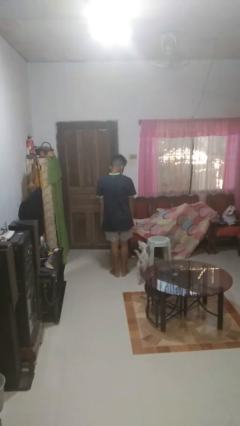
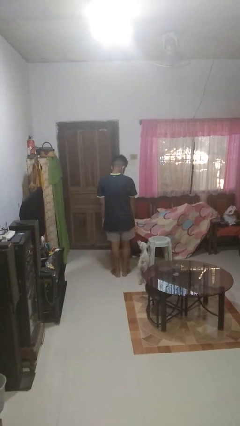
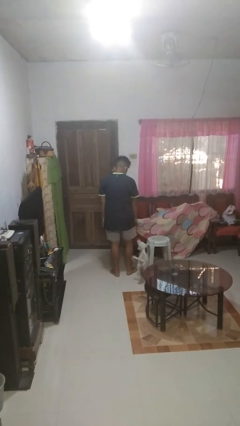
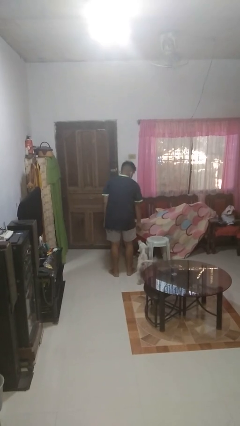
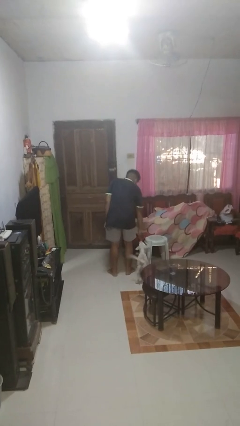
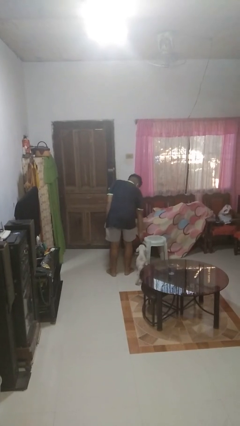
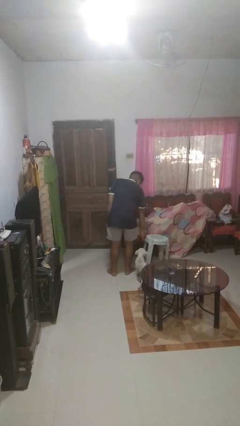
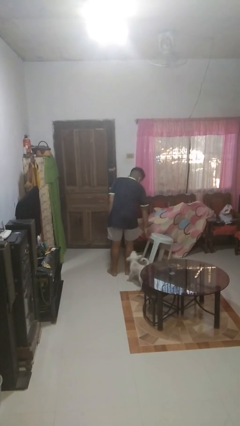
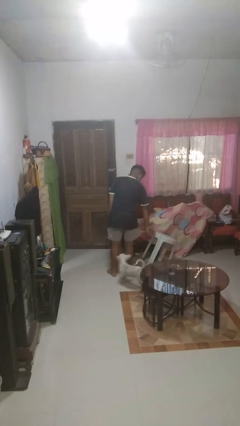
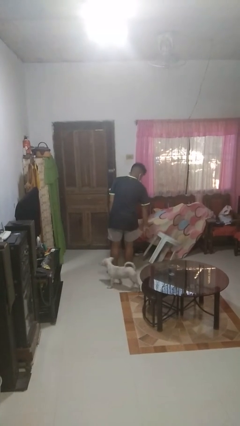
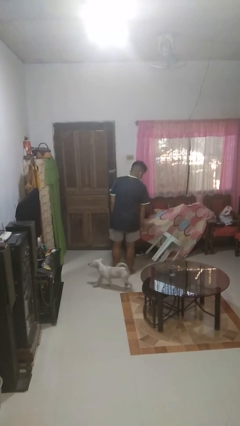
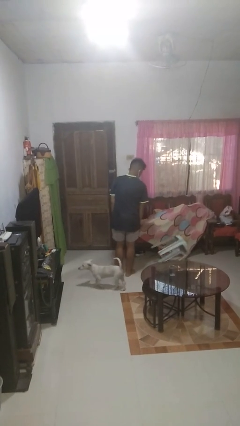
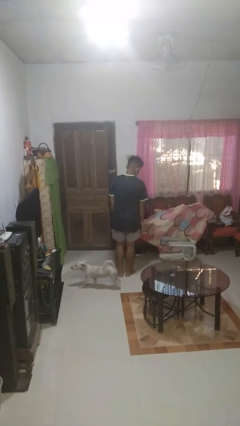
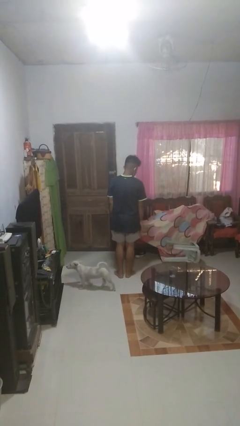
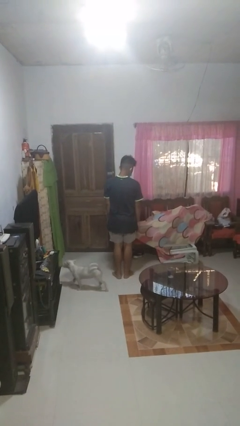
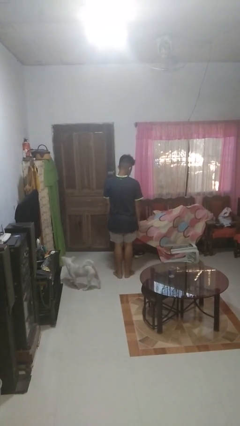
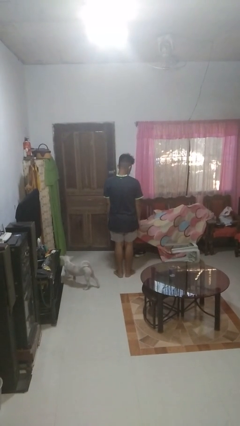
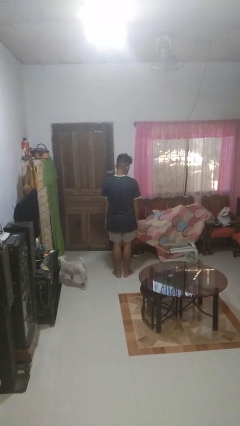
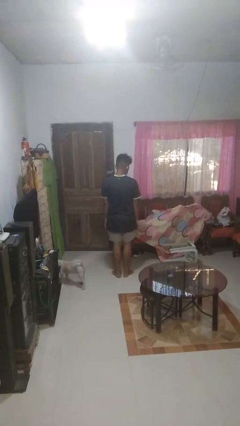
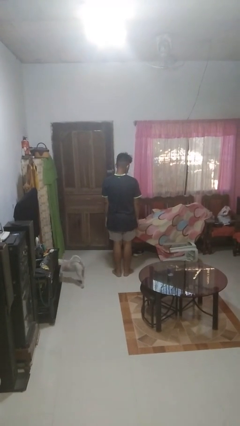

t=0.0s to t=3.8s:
person knocks over furniture

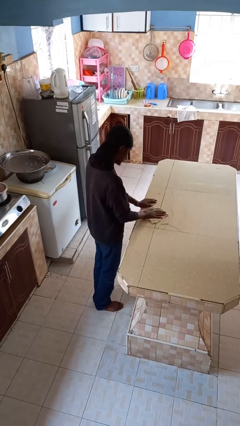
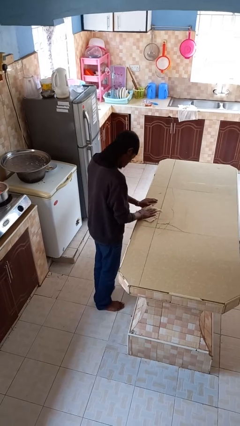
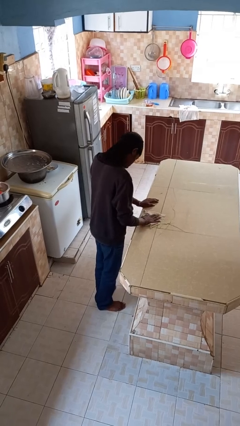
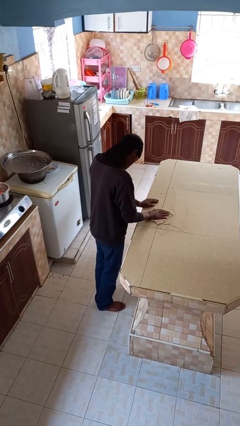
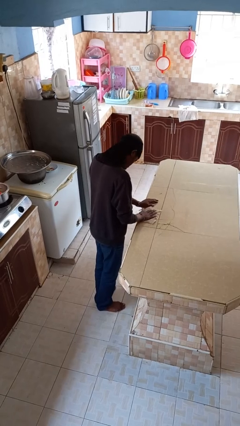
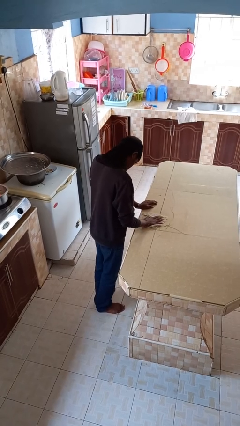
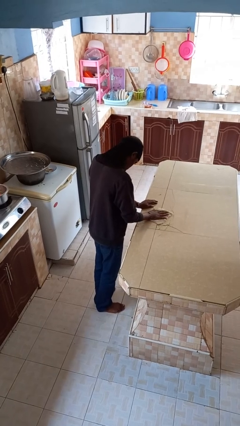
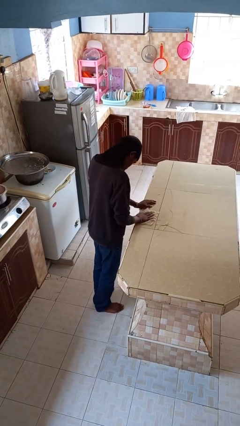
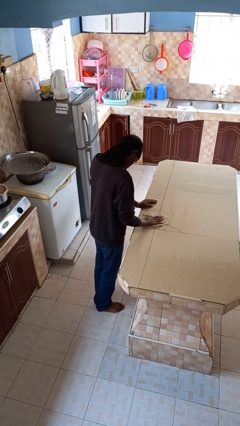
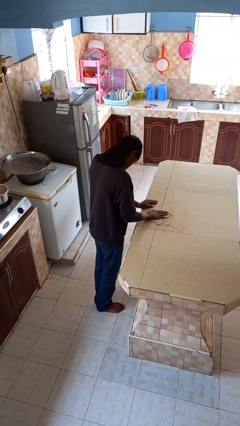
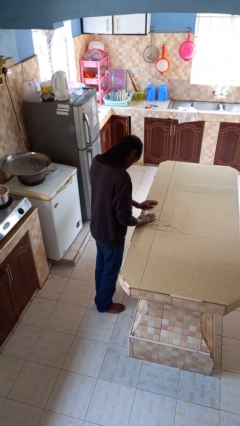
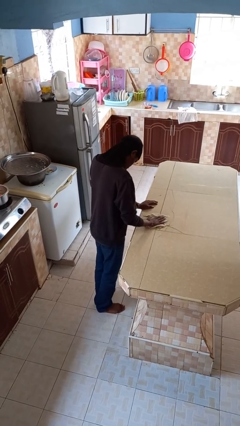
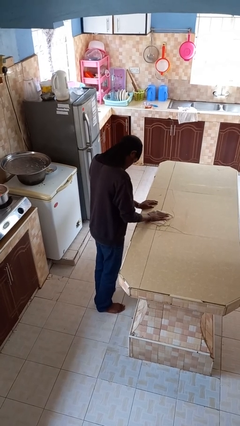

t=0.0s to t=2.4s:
person cleans table with rag

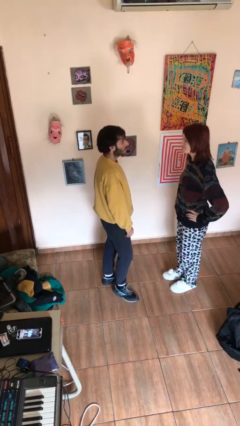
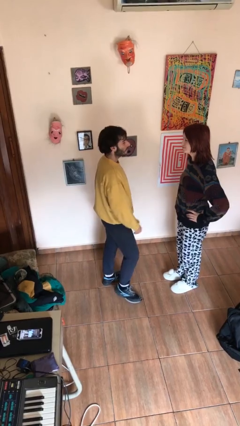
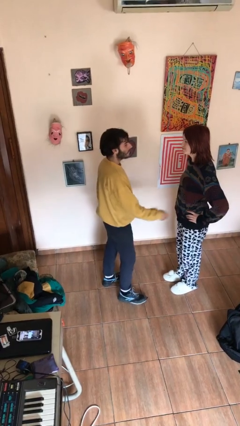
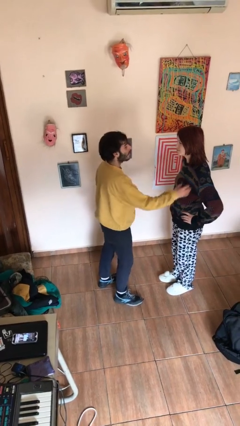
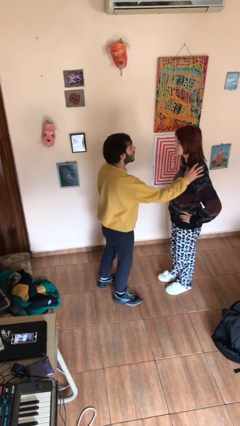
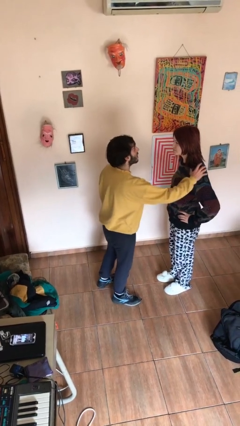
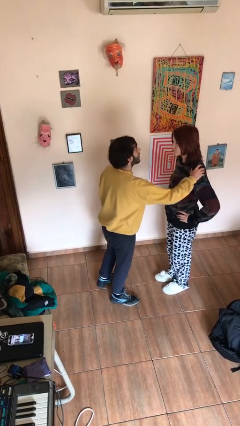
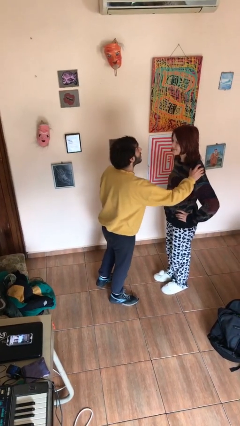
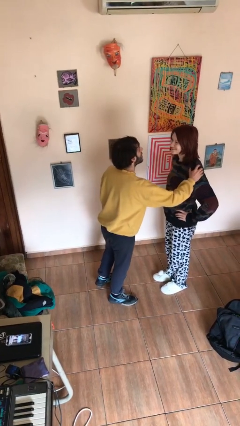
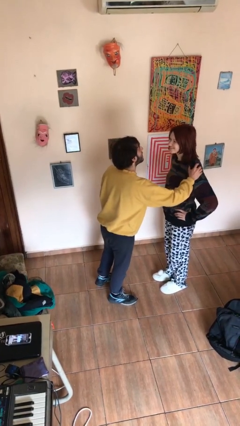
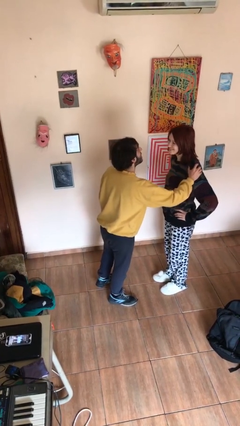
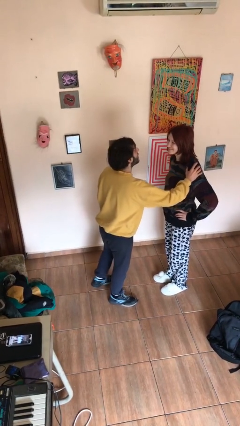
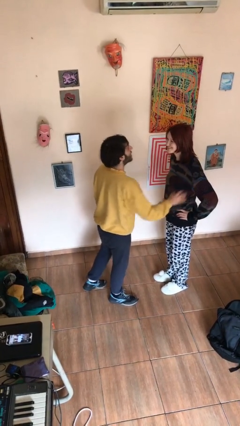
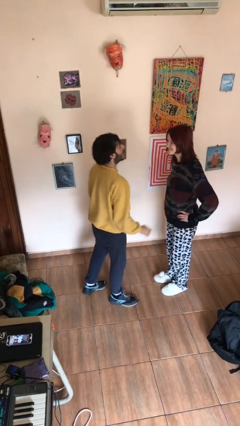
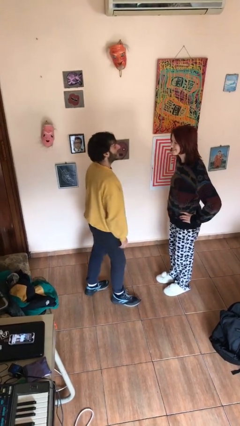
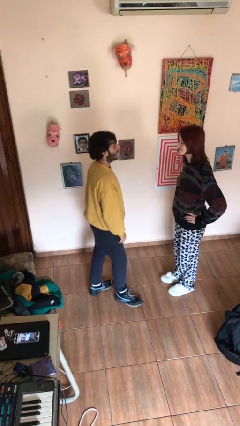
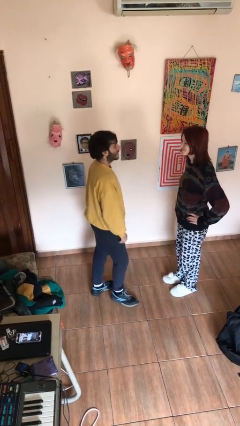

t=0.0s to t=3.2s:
person pounds shoulders of person

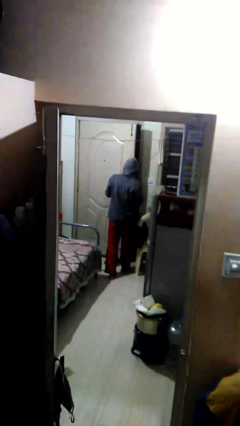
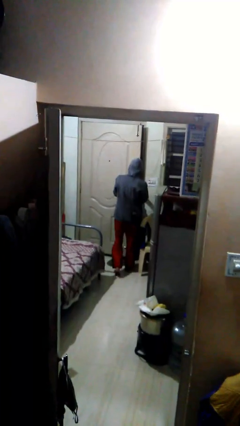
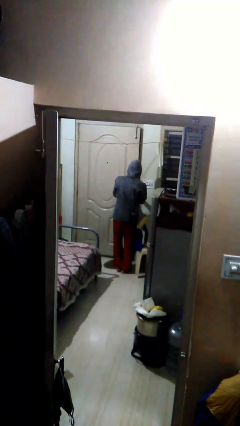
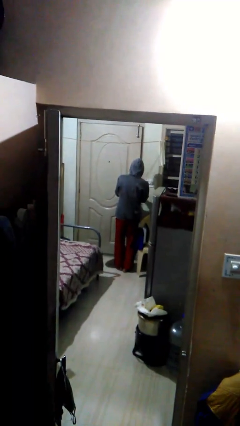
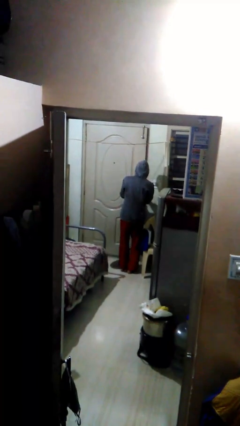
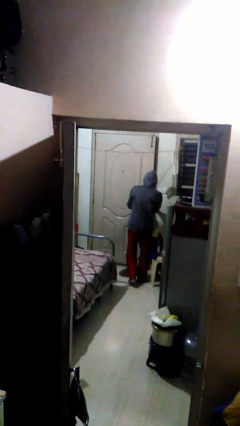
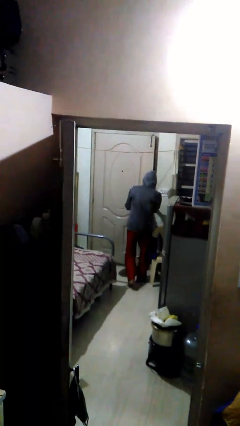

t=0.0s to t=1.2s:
person closes facility door

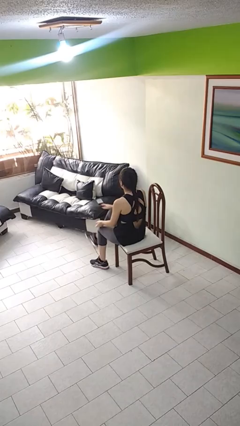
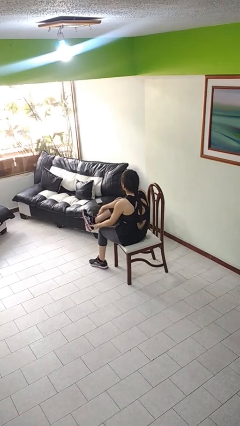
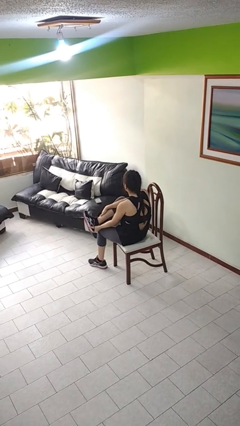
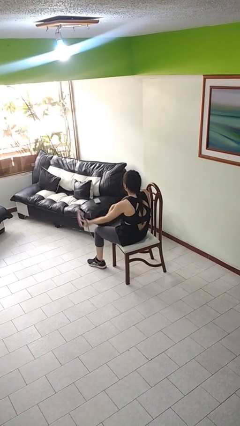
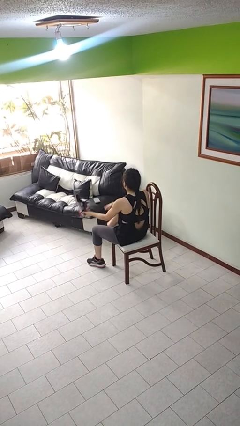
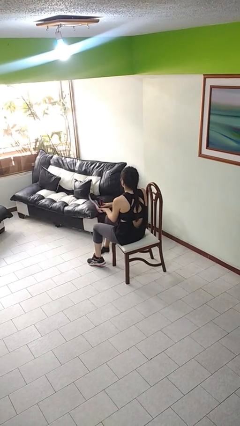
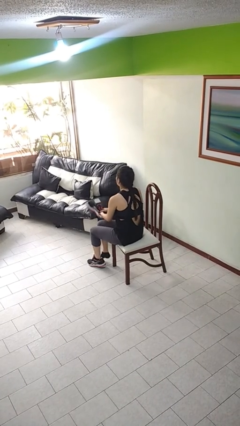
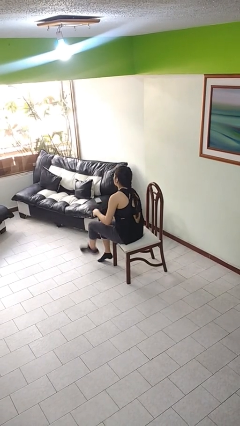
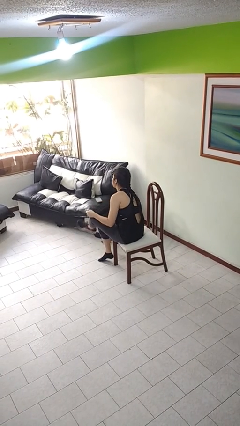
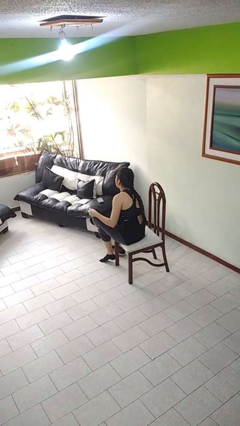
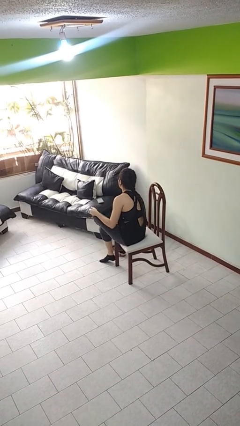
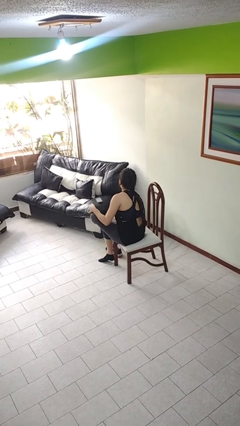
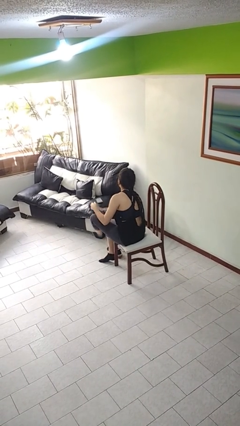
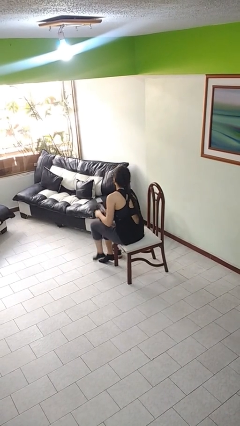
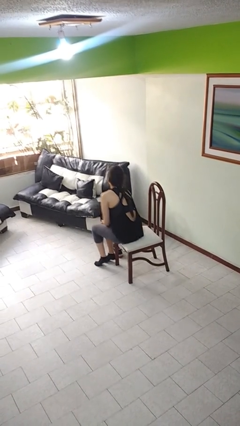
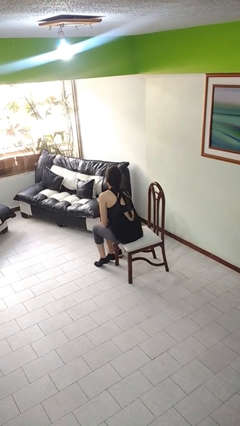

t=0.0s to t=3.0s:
person takes off shoes

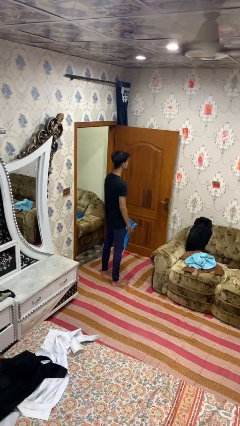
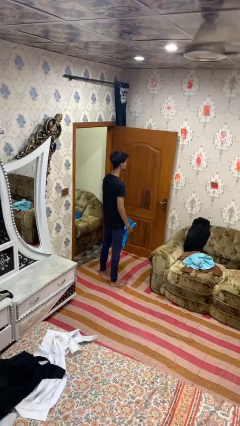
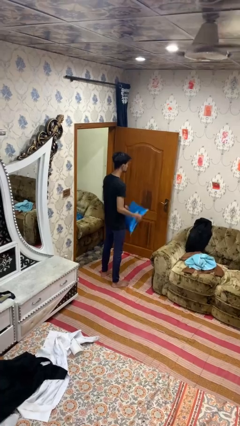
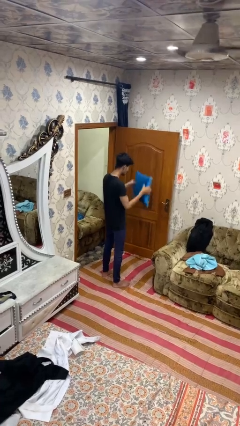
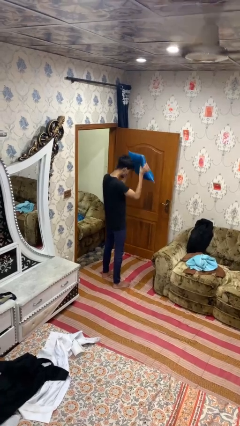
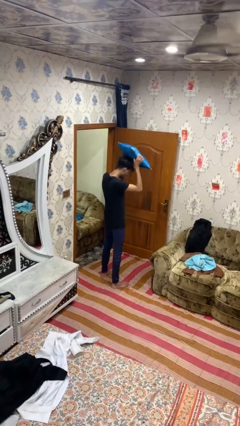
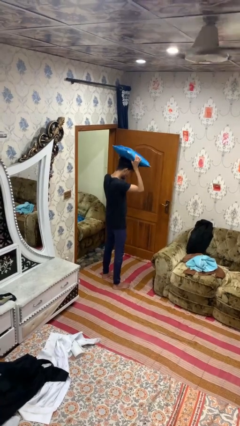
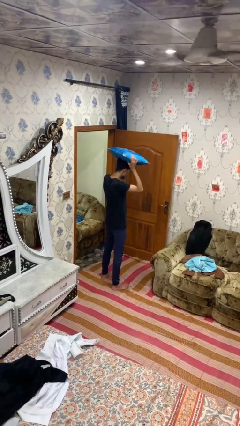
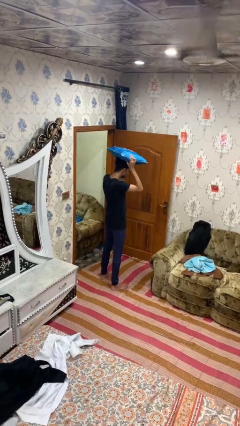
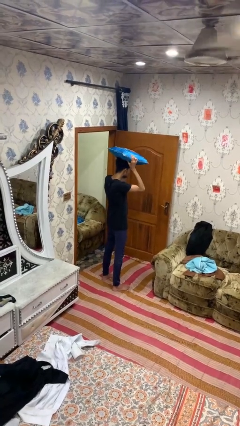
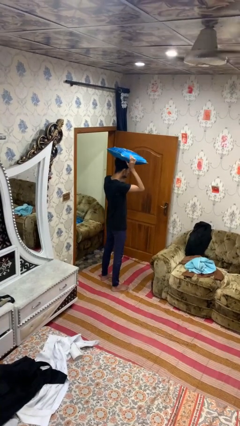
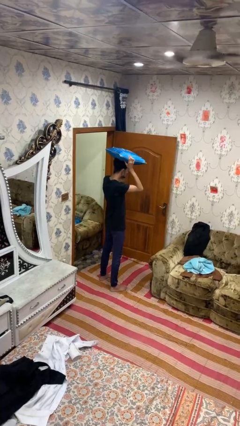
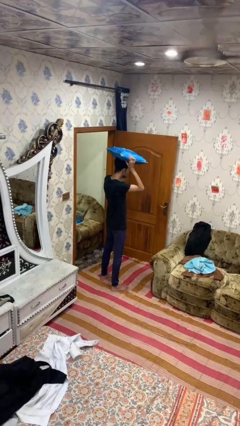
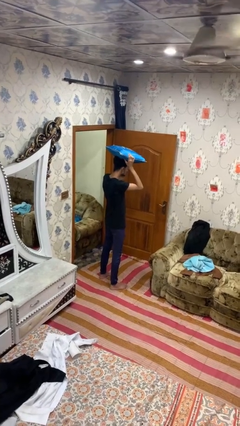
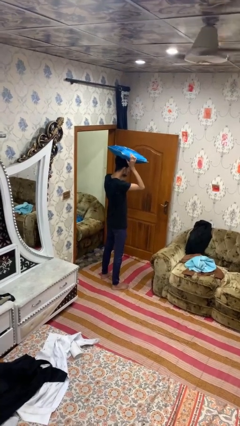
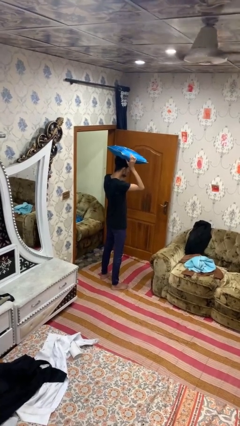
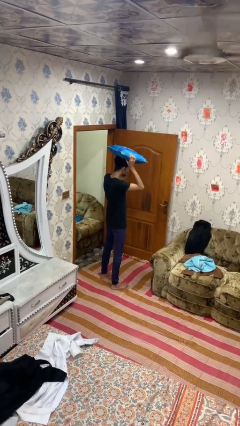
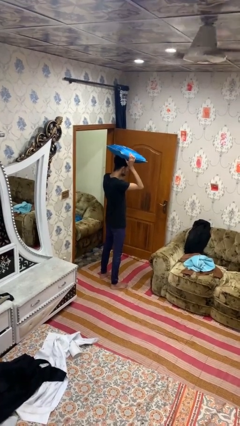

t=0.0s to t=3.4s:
person holds object above head

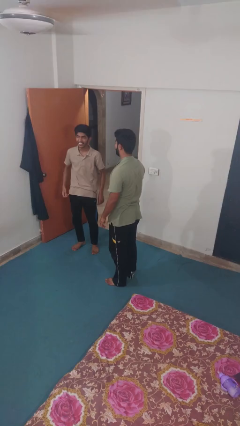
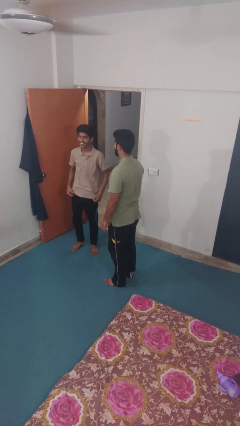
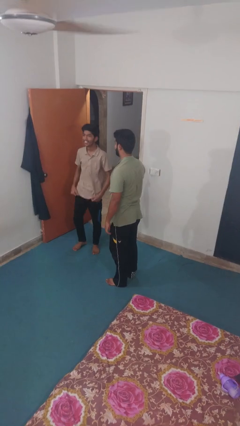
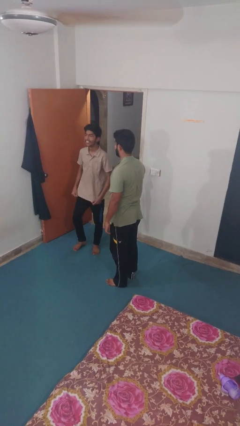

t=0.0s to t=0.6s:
person puts down person
